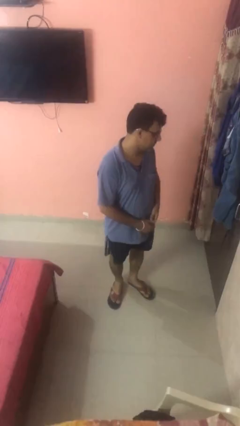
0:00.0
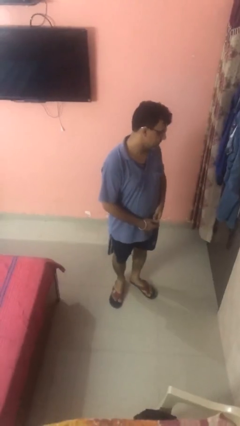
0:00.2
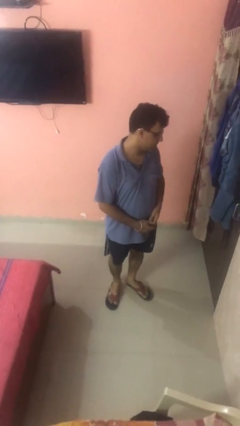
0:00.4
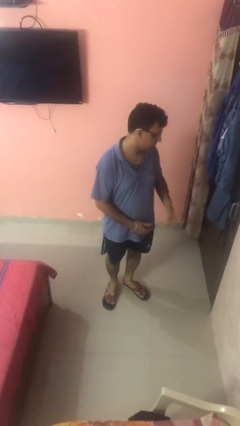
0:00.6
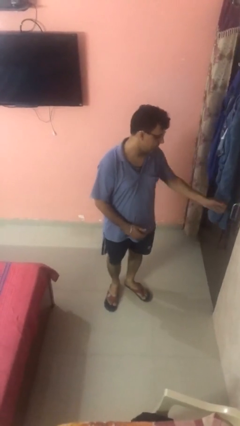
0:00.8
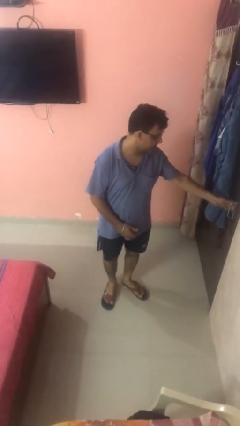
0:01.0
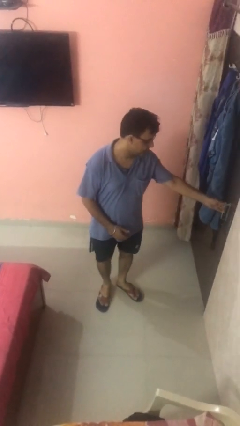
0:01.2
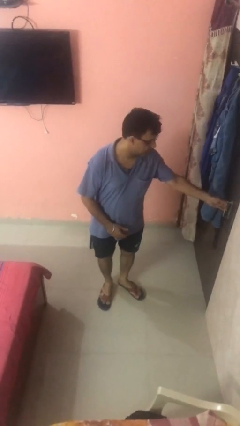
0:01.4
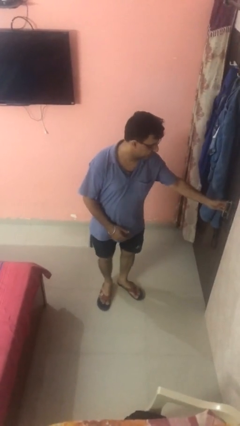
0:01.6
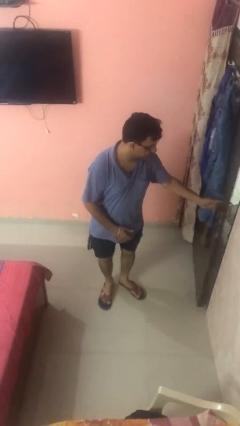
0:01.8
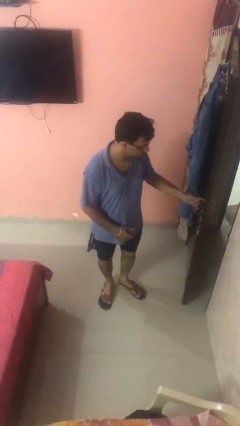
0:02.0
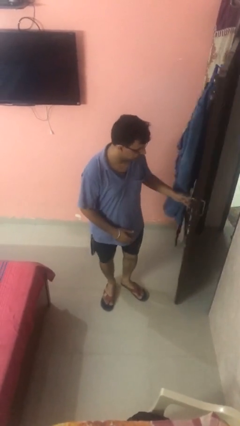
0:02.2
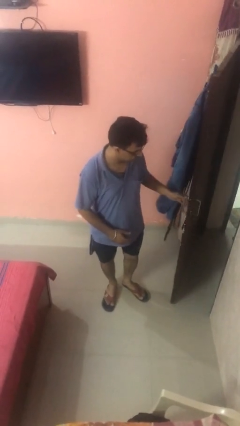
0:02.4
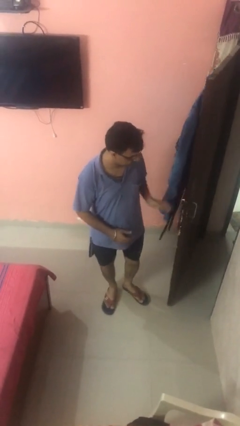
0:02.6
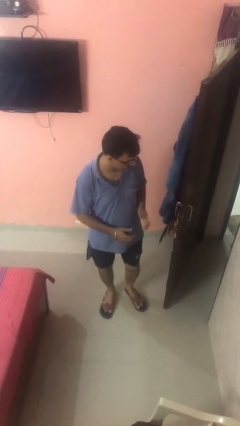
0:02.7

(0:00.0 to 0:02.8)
person opens facility door

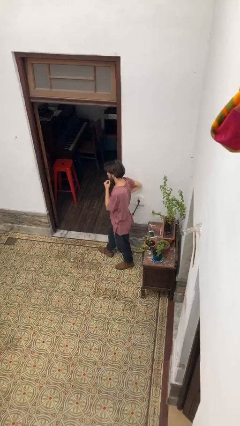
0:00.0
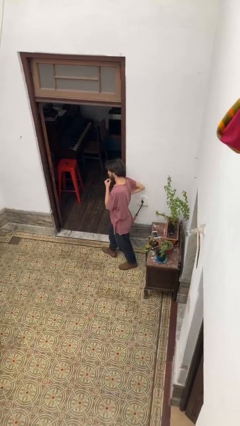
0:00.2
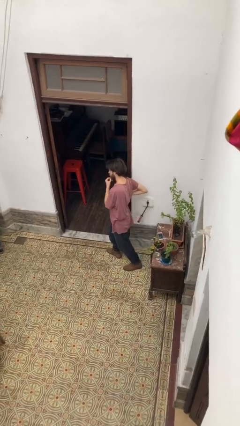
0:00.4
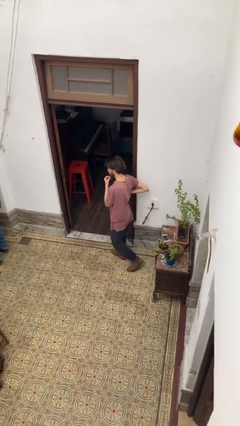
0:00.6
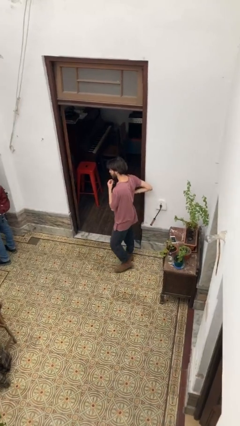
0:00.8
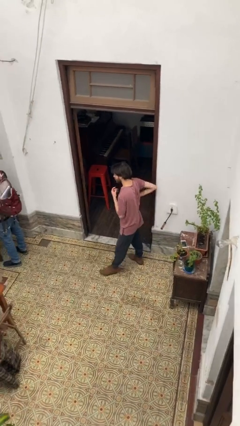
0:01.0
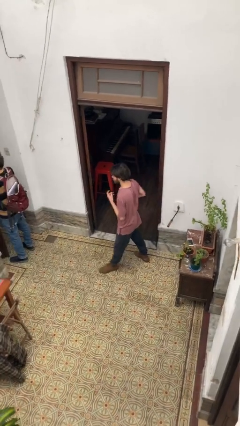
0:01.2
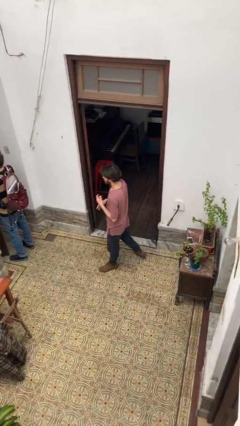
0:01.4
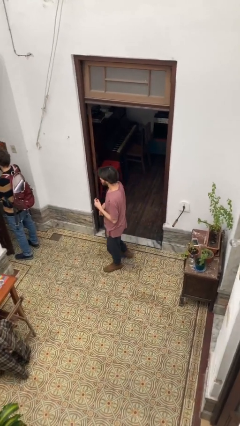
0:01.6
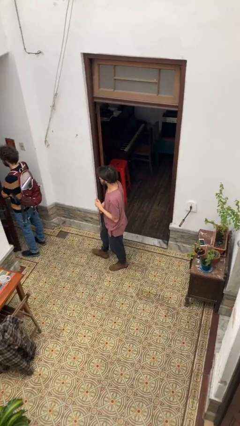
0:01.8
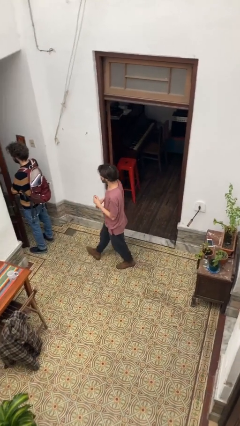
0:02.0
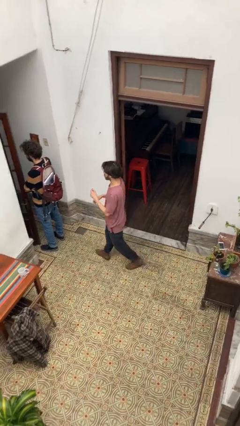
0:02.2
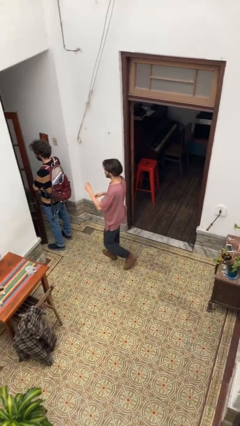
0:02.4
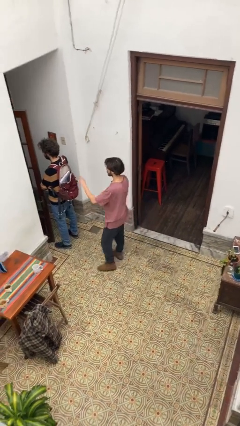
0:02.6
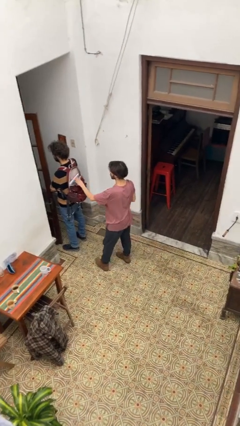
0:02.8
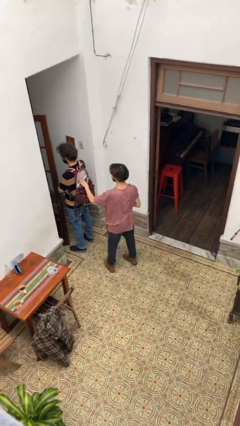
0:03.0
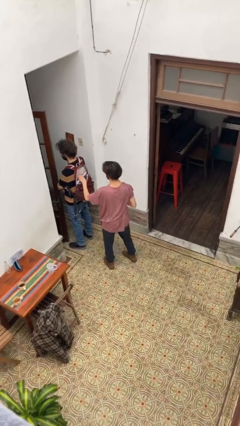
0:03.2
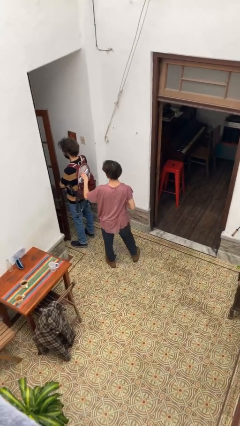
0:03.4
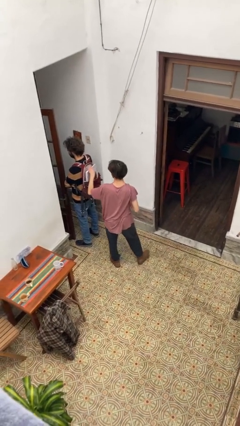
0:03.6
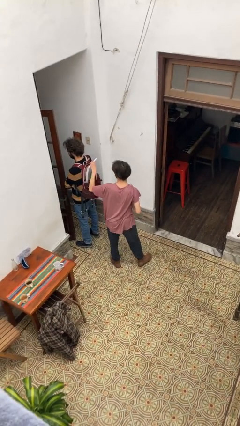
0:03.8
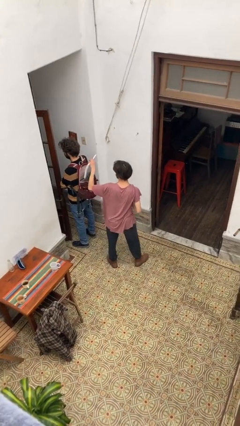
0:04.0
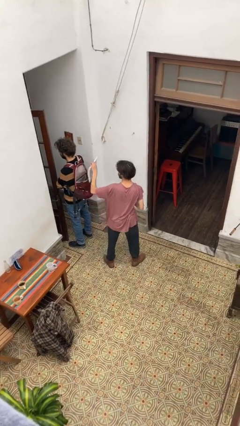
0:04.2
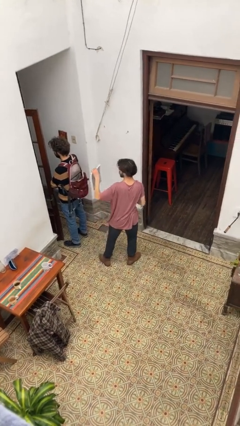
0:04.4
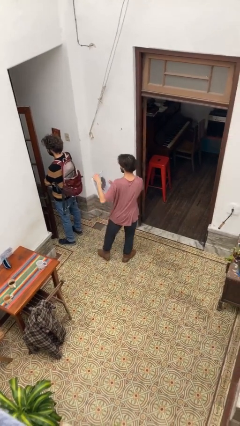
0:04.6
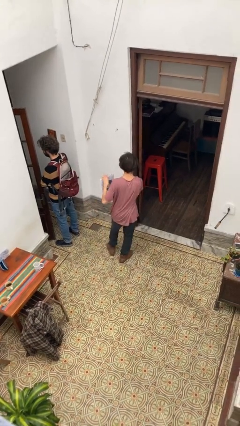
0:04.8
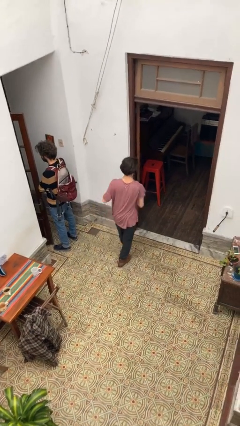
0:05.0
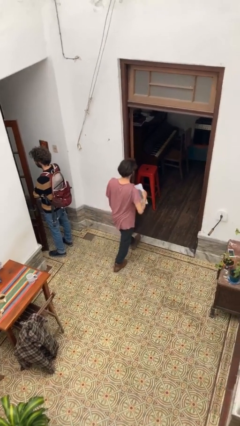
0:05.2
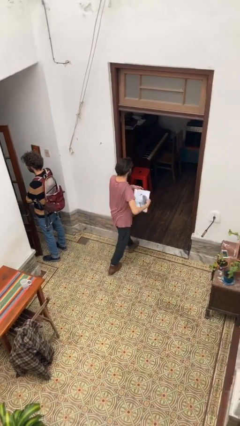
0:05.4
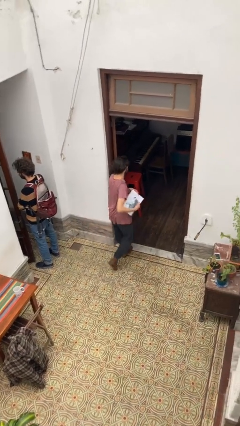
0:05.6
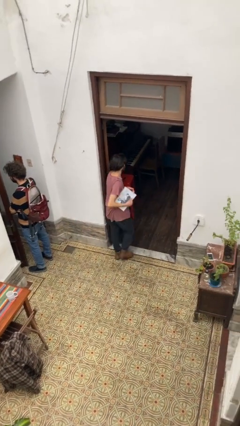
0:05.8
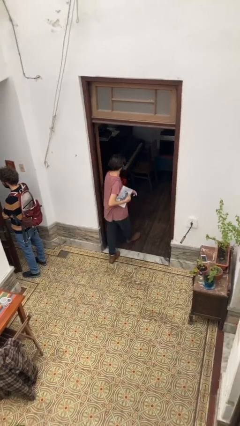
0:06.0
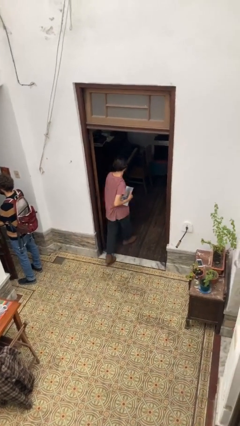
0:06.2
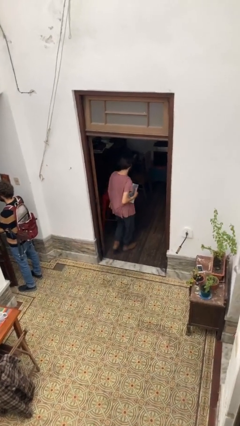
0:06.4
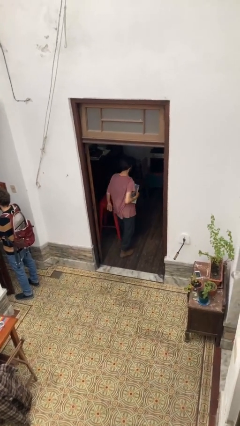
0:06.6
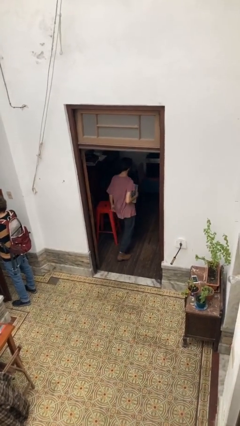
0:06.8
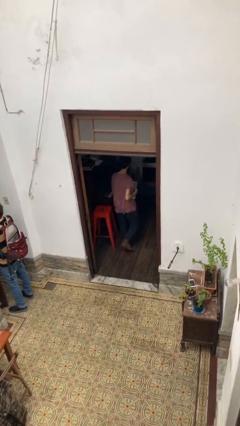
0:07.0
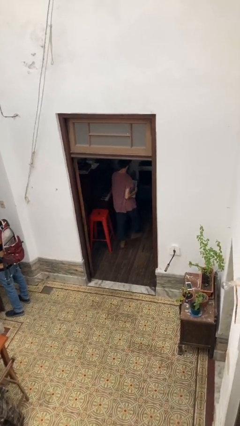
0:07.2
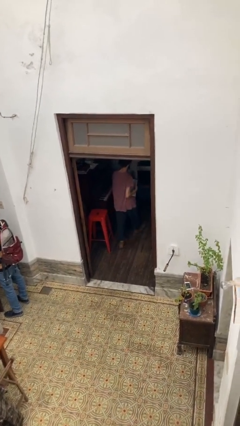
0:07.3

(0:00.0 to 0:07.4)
person steals object from person

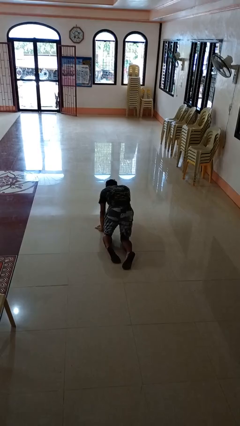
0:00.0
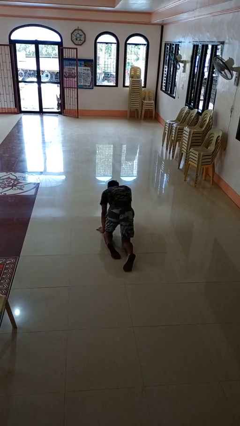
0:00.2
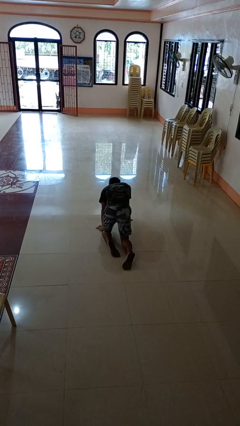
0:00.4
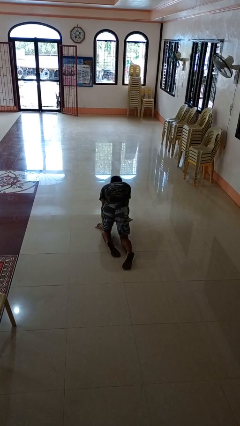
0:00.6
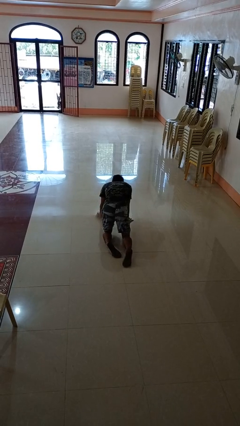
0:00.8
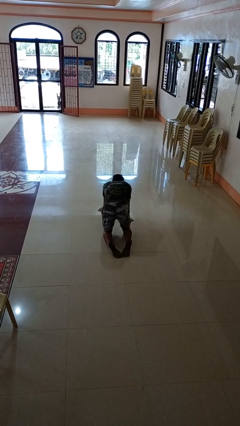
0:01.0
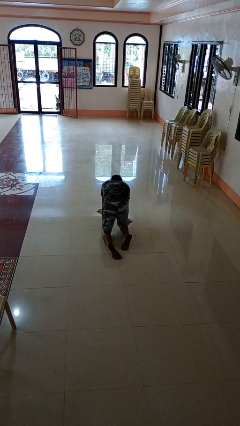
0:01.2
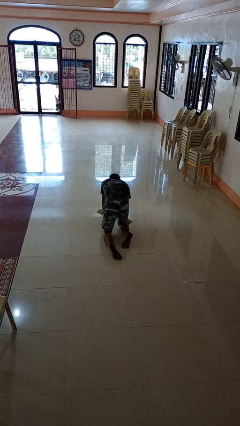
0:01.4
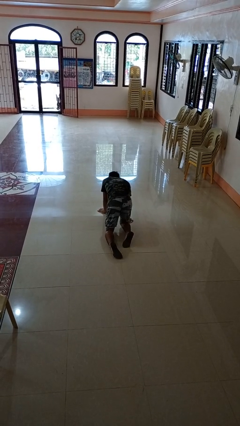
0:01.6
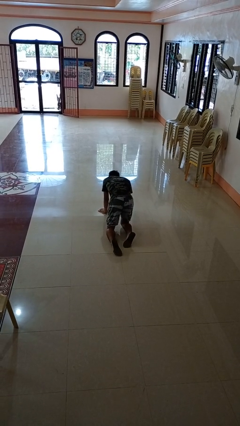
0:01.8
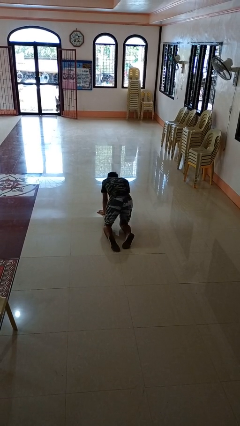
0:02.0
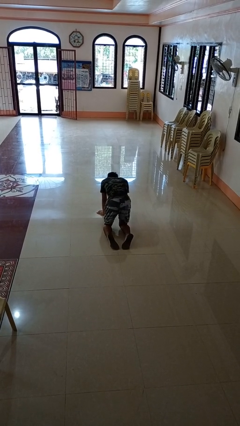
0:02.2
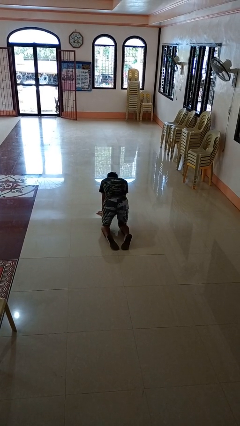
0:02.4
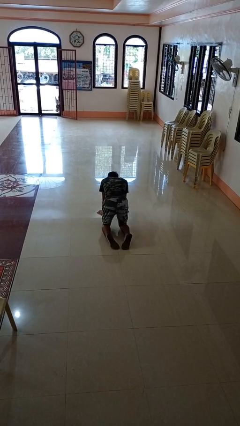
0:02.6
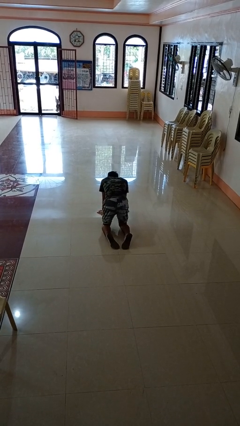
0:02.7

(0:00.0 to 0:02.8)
person crawls

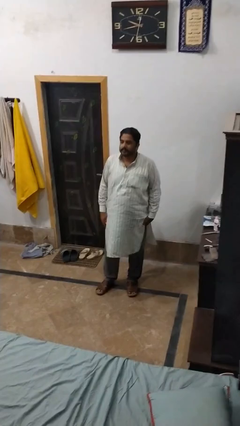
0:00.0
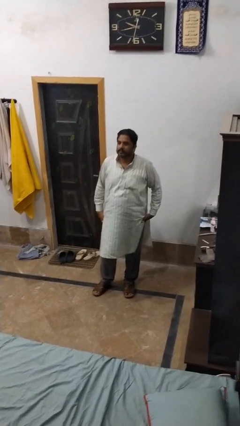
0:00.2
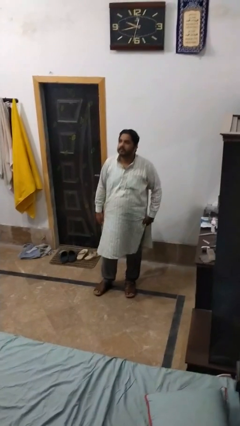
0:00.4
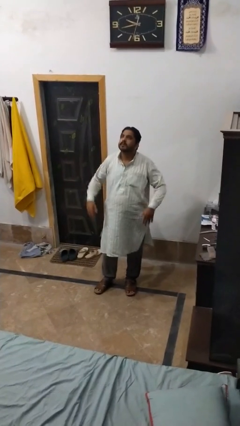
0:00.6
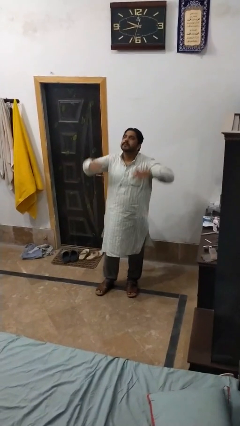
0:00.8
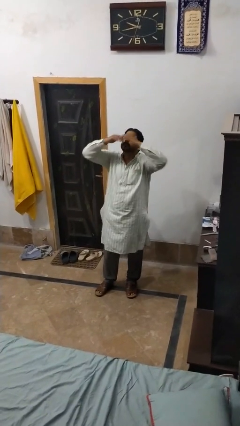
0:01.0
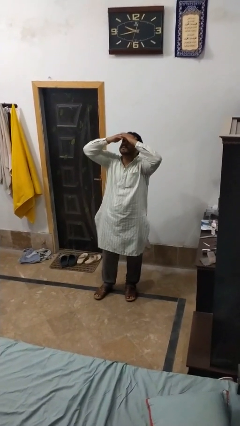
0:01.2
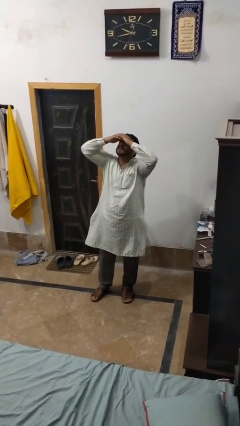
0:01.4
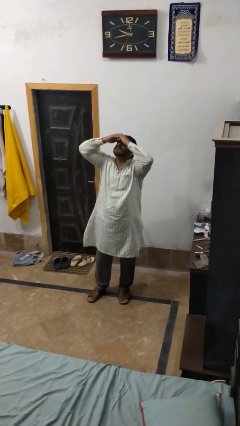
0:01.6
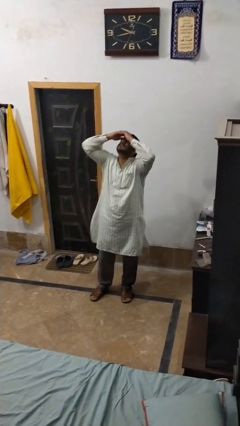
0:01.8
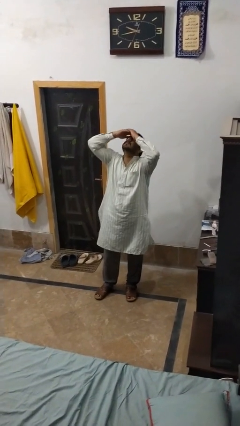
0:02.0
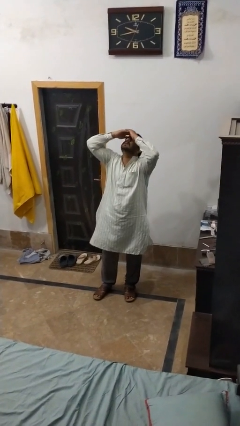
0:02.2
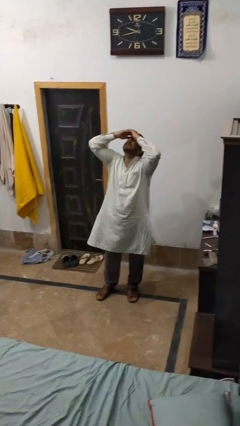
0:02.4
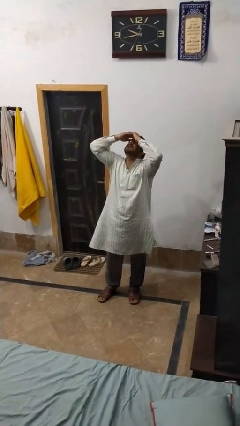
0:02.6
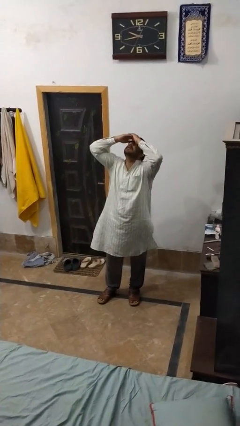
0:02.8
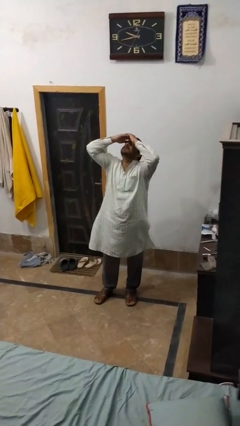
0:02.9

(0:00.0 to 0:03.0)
person shades eyes

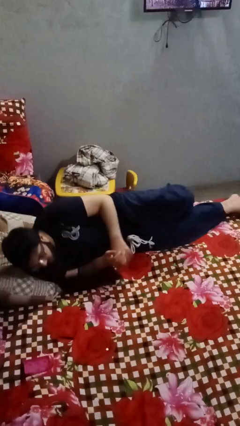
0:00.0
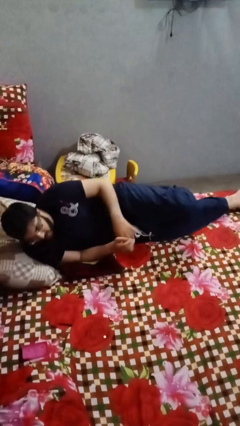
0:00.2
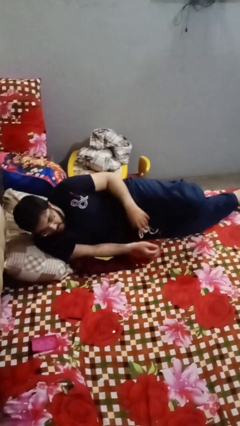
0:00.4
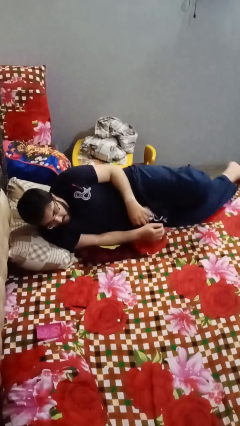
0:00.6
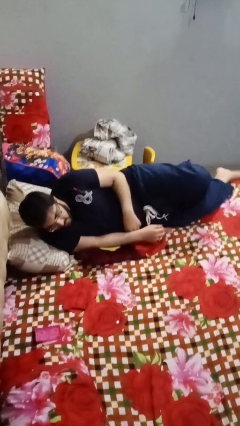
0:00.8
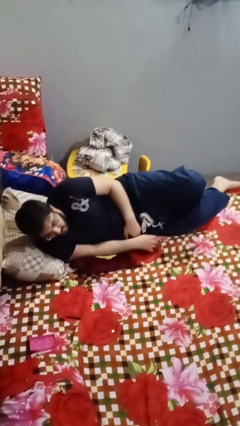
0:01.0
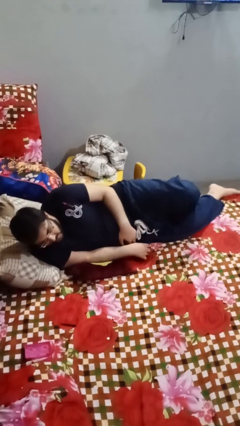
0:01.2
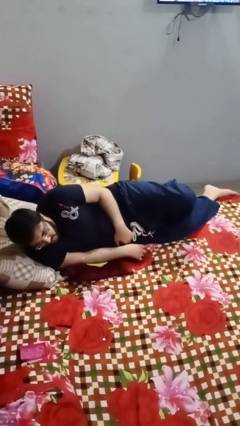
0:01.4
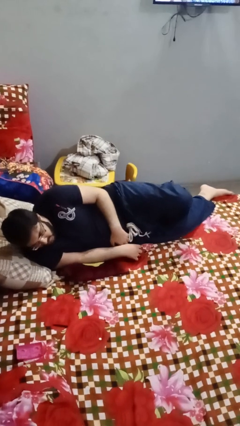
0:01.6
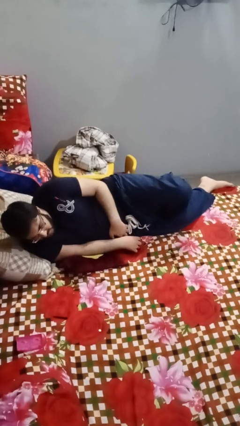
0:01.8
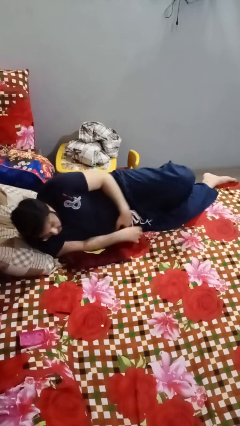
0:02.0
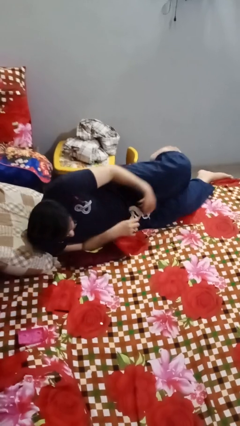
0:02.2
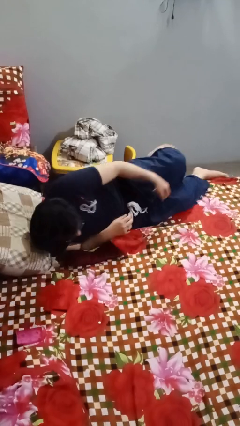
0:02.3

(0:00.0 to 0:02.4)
person lies down on bed
